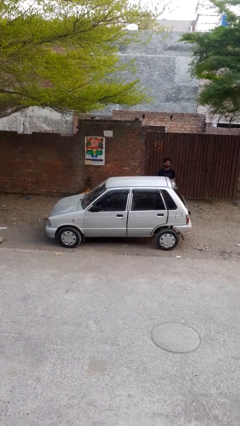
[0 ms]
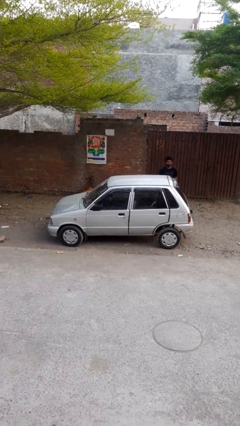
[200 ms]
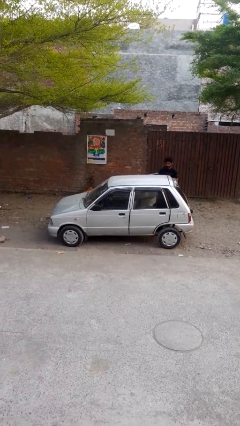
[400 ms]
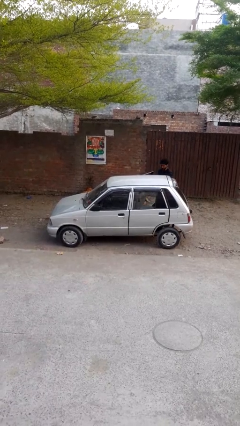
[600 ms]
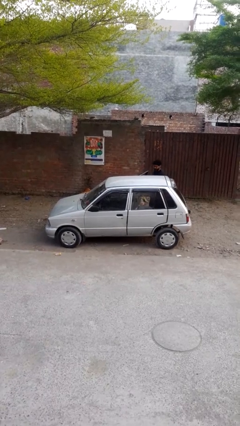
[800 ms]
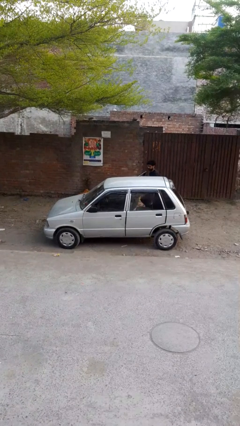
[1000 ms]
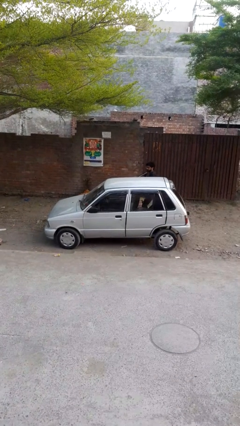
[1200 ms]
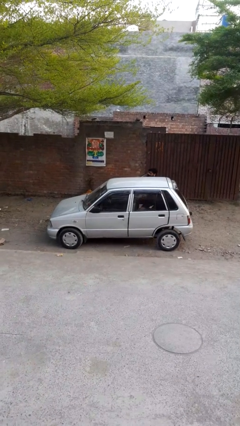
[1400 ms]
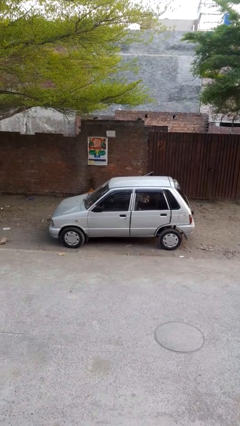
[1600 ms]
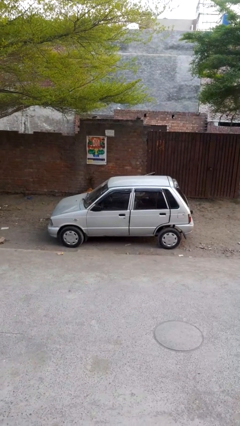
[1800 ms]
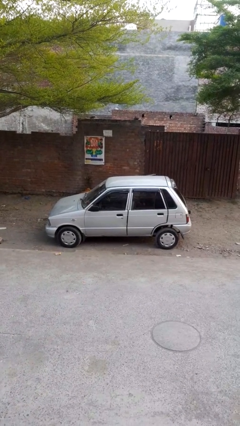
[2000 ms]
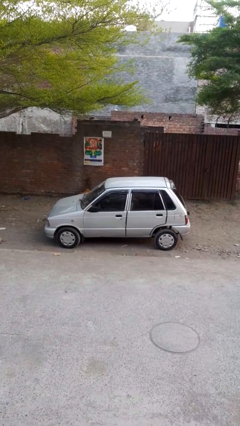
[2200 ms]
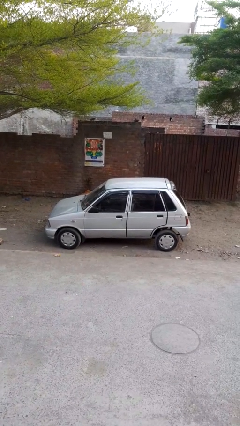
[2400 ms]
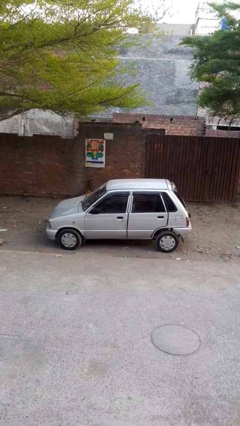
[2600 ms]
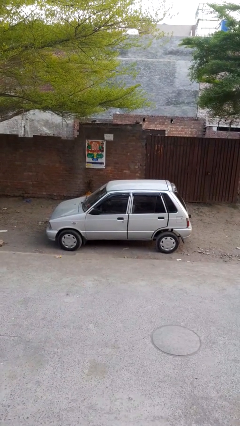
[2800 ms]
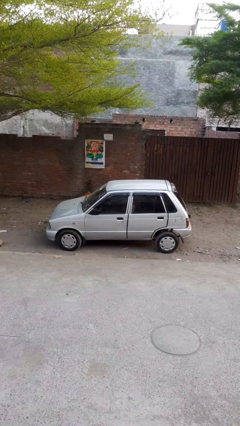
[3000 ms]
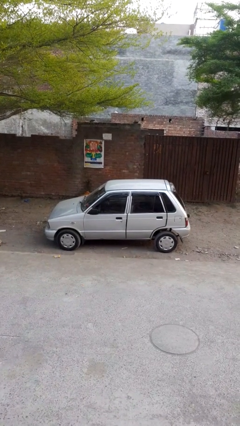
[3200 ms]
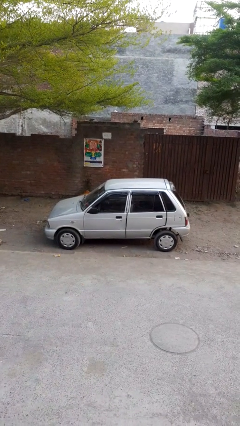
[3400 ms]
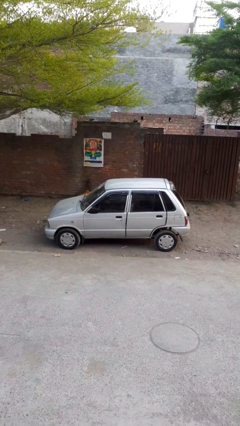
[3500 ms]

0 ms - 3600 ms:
car picks up person

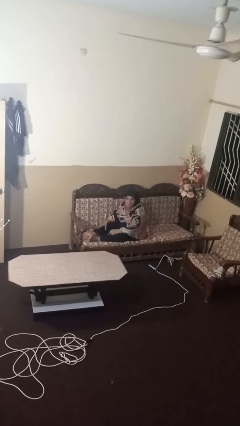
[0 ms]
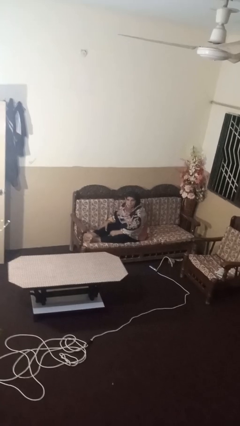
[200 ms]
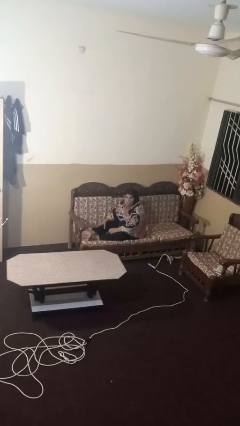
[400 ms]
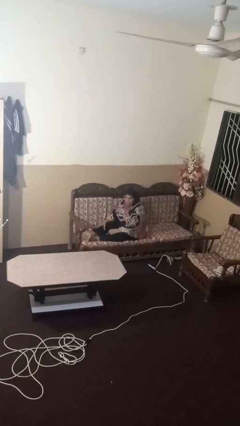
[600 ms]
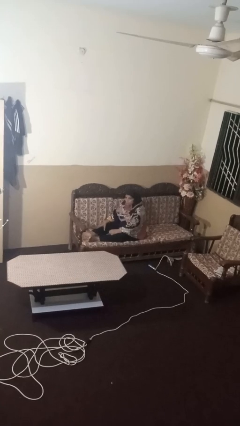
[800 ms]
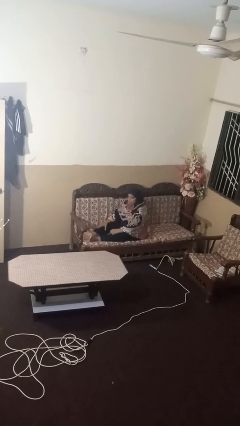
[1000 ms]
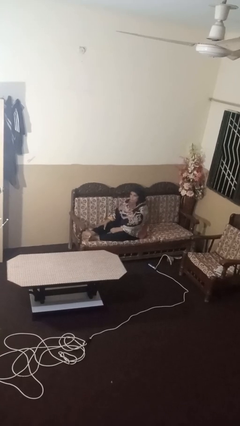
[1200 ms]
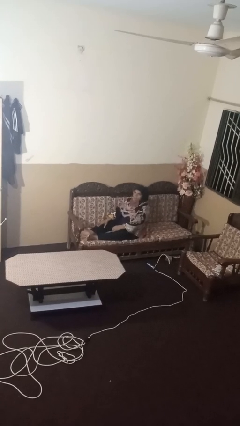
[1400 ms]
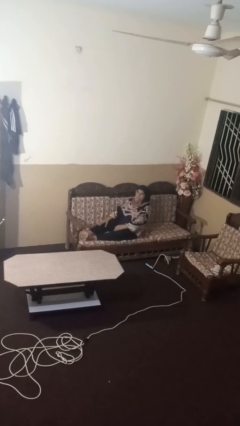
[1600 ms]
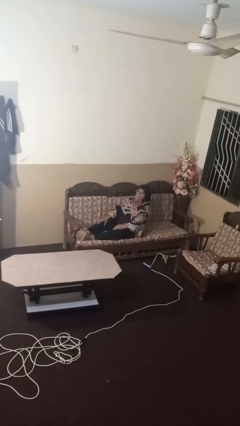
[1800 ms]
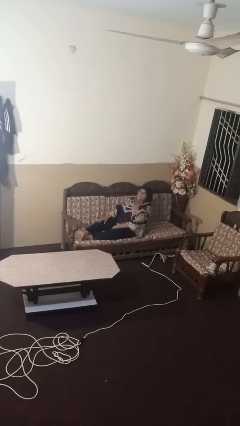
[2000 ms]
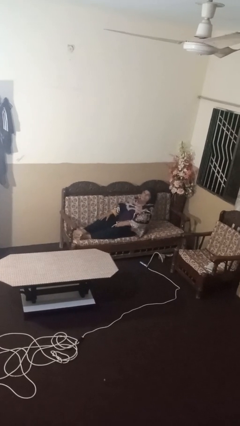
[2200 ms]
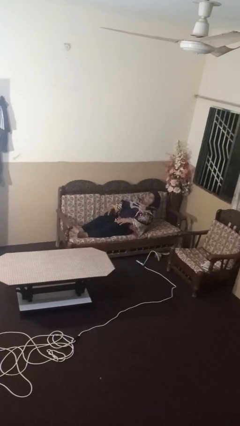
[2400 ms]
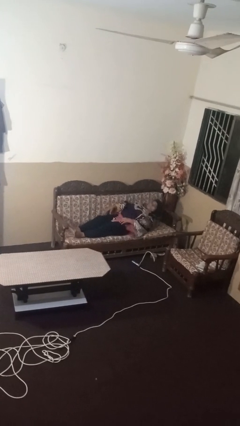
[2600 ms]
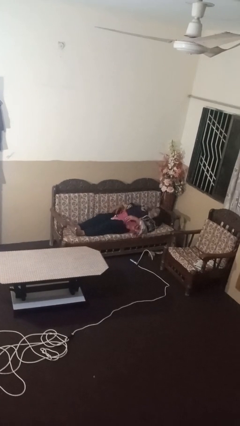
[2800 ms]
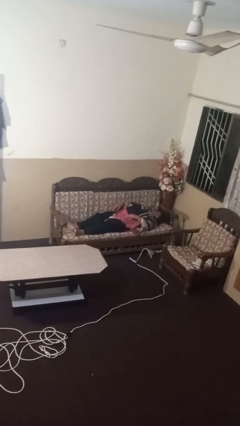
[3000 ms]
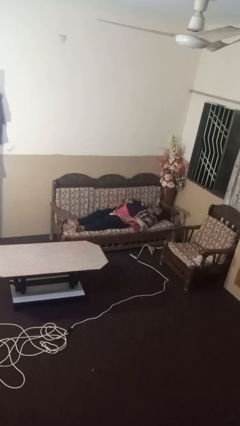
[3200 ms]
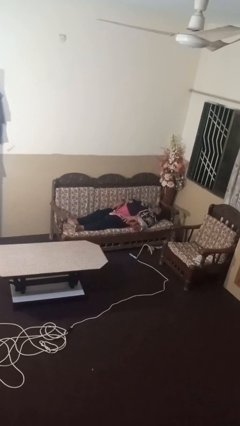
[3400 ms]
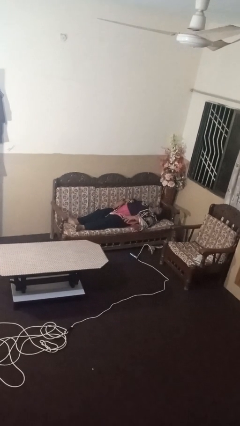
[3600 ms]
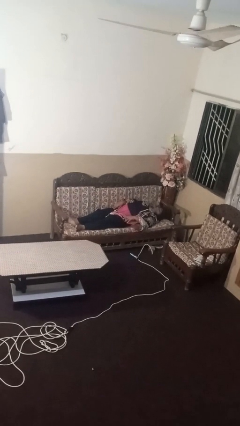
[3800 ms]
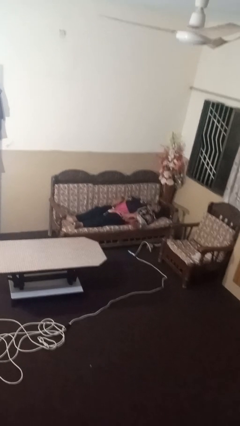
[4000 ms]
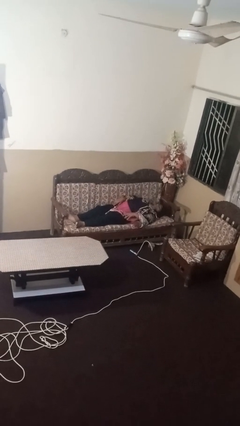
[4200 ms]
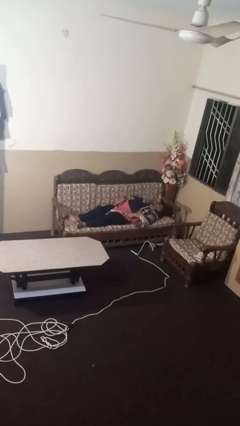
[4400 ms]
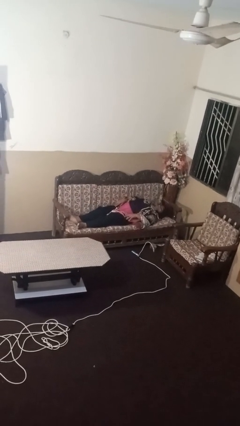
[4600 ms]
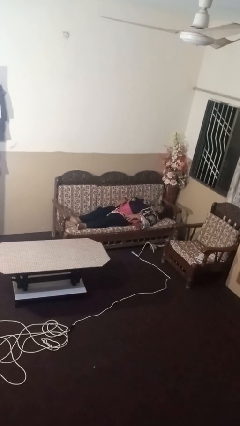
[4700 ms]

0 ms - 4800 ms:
person lies down on couch

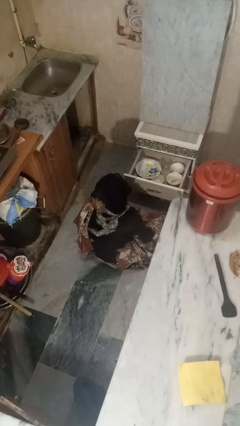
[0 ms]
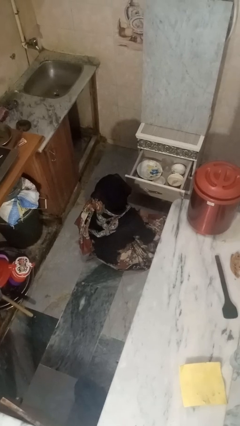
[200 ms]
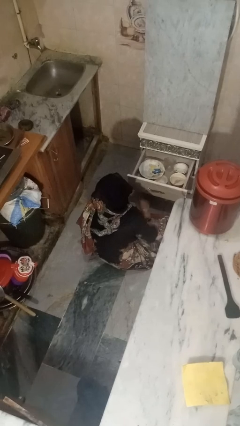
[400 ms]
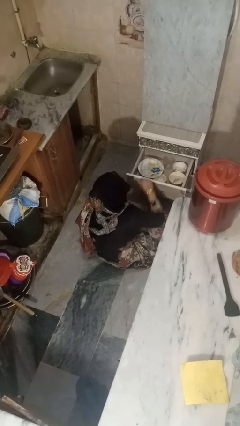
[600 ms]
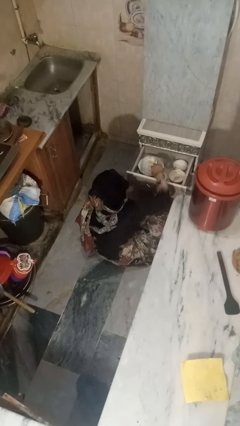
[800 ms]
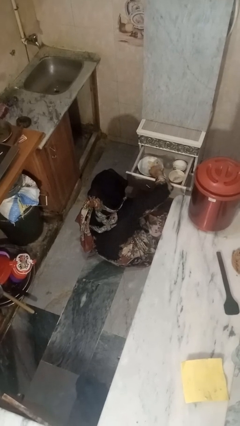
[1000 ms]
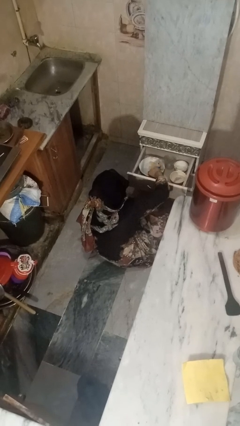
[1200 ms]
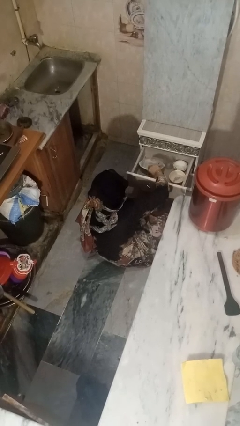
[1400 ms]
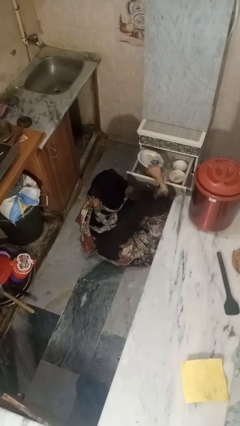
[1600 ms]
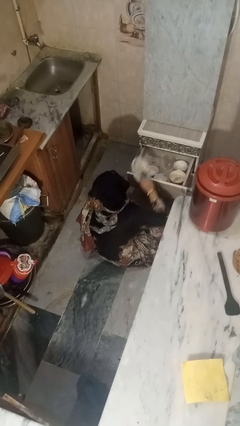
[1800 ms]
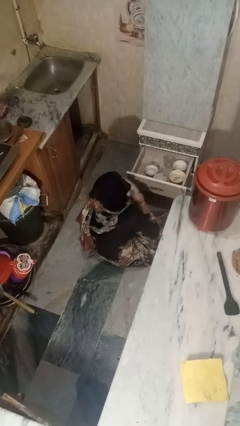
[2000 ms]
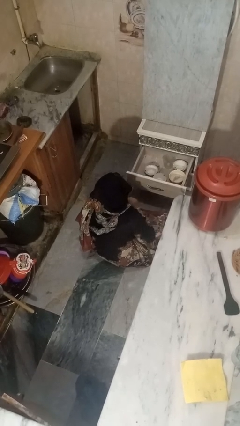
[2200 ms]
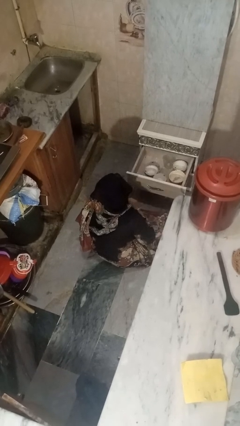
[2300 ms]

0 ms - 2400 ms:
person takes object from kitchen drawer

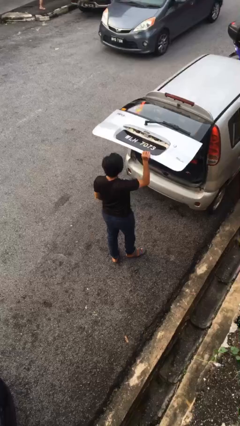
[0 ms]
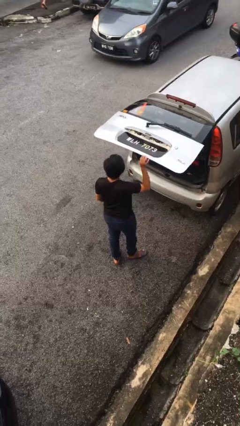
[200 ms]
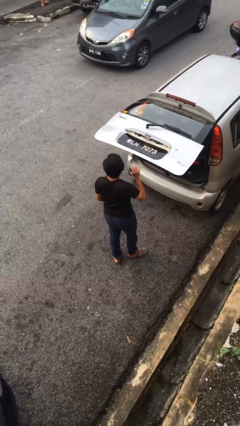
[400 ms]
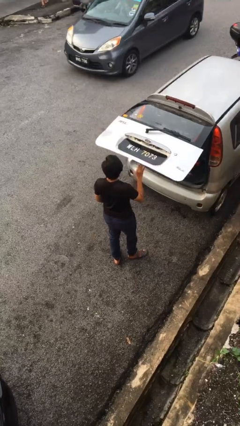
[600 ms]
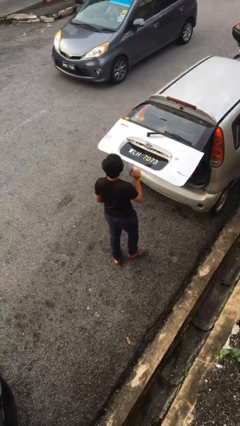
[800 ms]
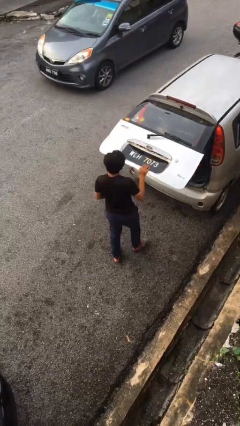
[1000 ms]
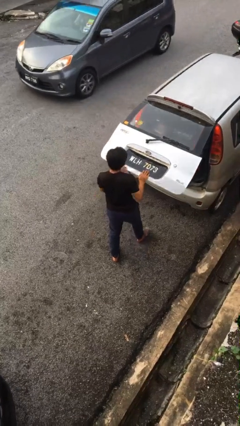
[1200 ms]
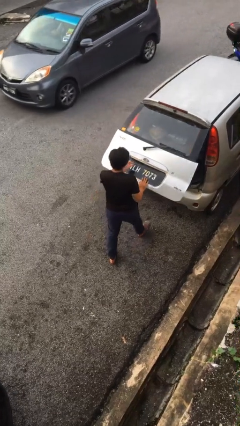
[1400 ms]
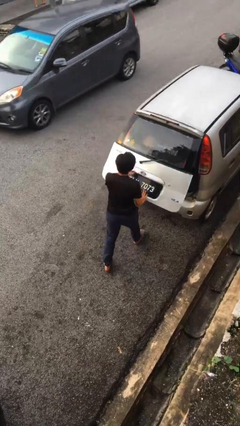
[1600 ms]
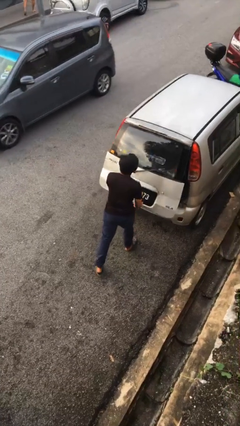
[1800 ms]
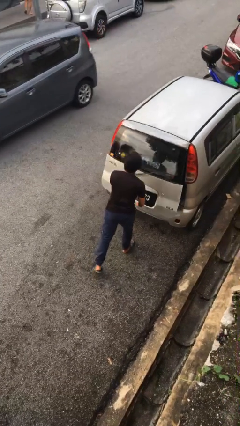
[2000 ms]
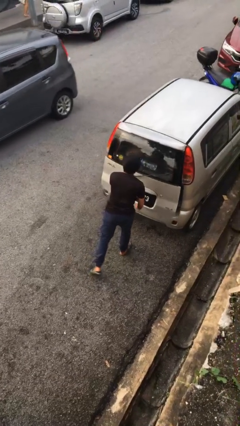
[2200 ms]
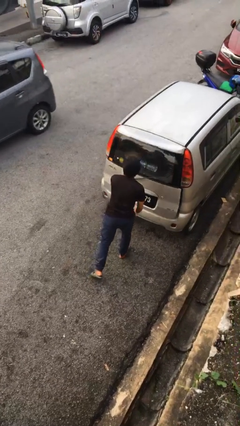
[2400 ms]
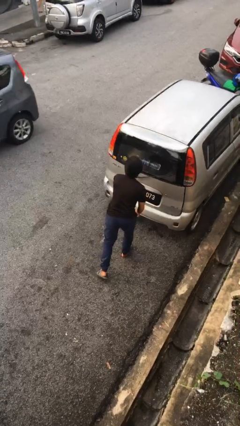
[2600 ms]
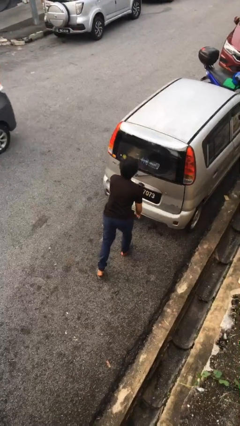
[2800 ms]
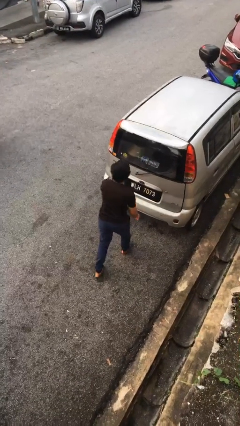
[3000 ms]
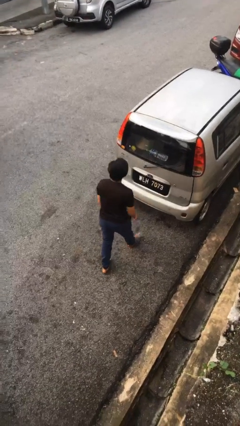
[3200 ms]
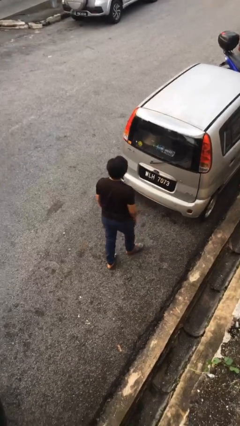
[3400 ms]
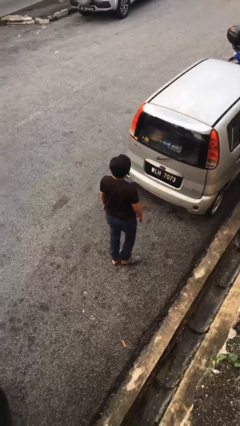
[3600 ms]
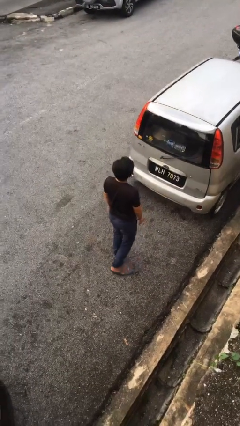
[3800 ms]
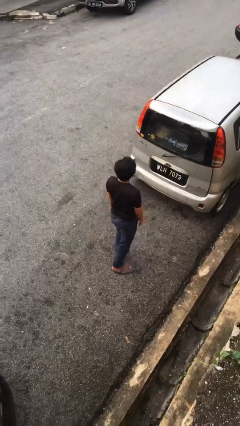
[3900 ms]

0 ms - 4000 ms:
person closes car trunk

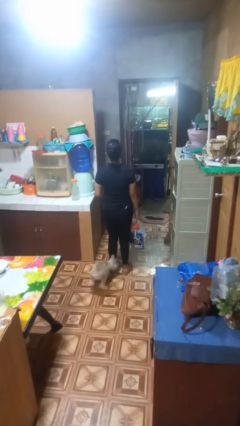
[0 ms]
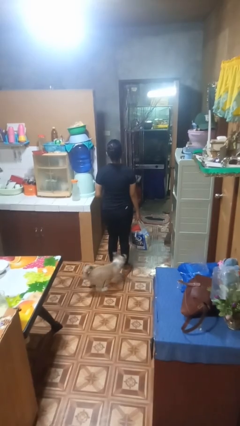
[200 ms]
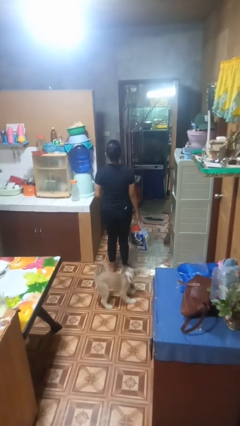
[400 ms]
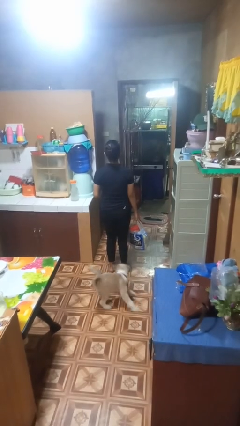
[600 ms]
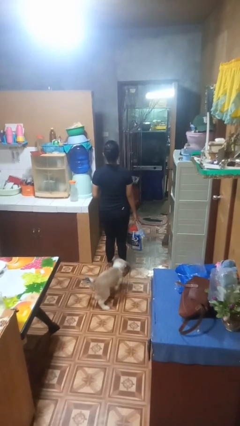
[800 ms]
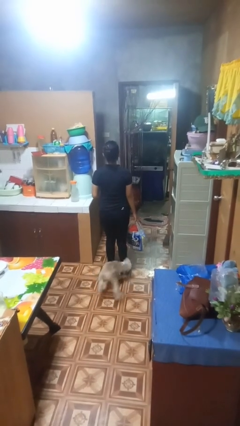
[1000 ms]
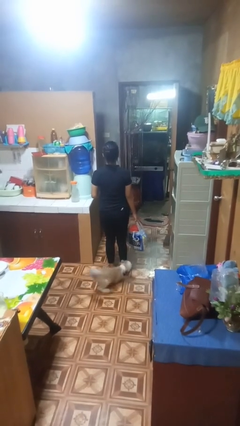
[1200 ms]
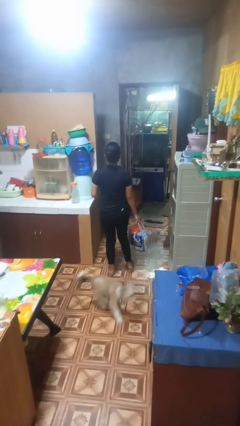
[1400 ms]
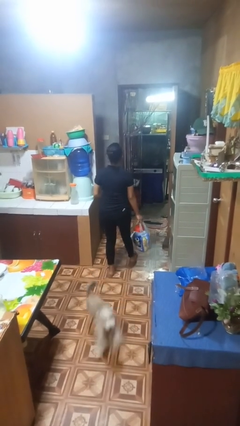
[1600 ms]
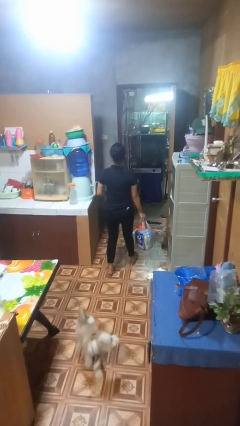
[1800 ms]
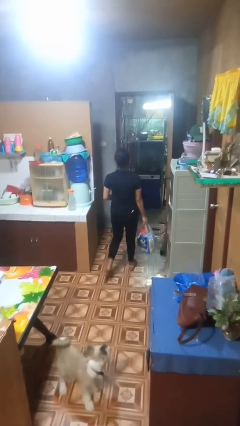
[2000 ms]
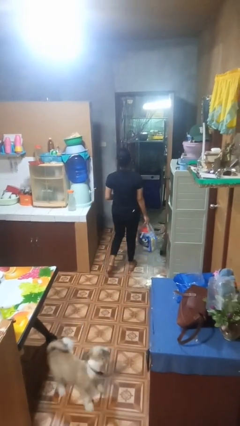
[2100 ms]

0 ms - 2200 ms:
person carries groceries
